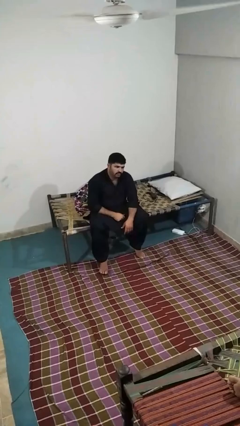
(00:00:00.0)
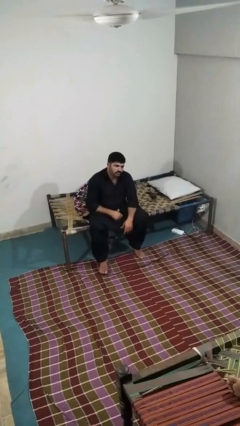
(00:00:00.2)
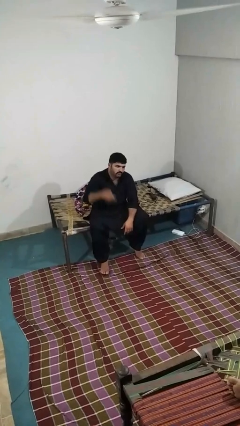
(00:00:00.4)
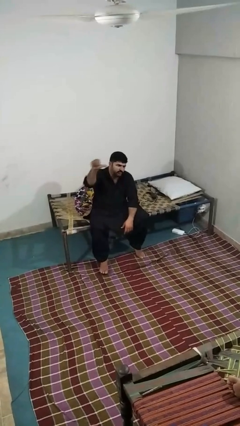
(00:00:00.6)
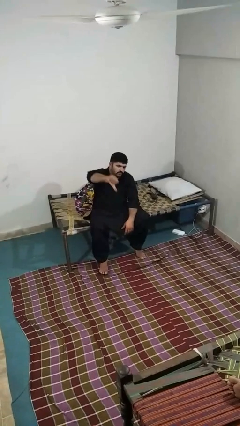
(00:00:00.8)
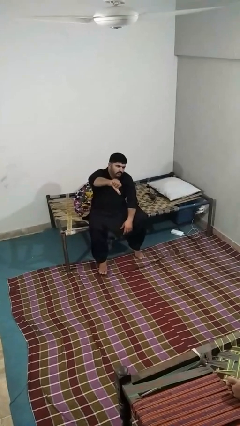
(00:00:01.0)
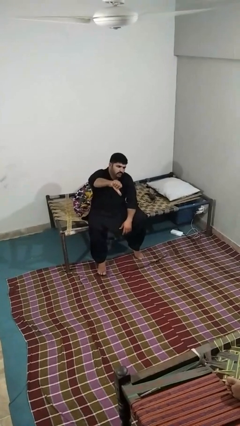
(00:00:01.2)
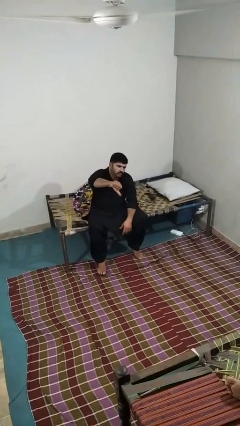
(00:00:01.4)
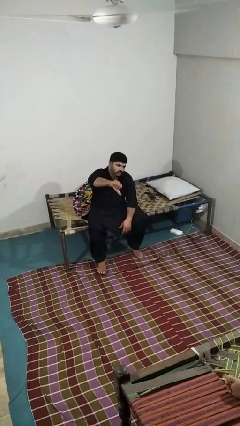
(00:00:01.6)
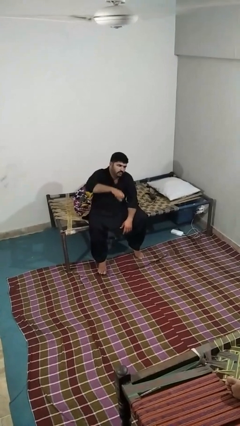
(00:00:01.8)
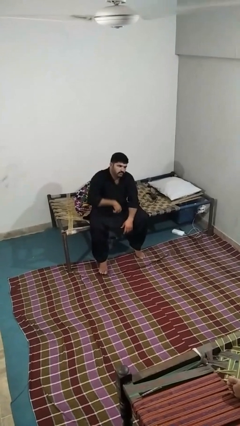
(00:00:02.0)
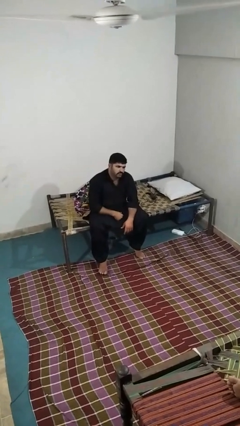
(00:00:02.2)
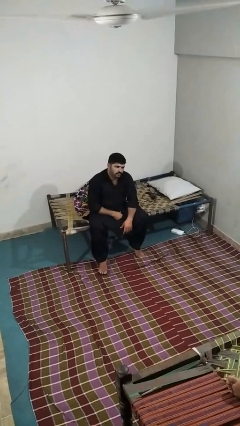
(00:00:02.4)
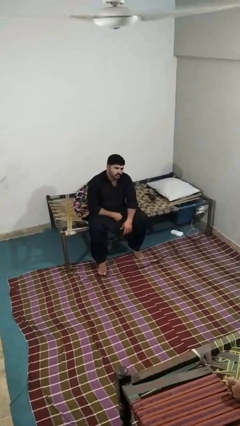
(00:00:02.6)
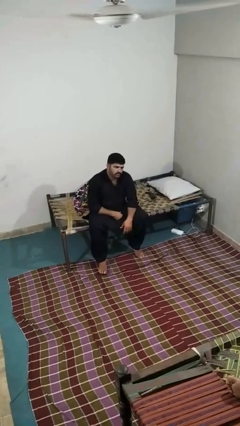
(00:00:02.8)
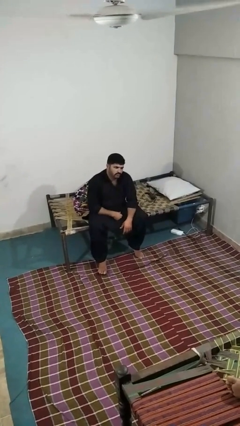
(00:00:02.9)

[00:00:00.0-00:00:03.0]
person gestures thumbs down

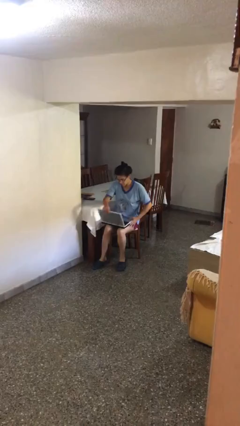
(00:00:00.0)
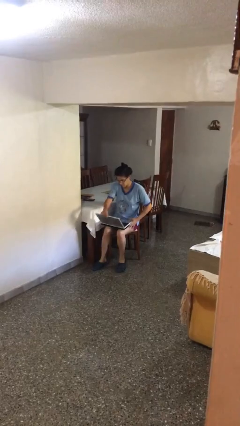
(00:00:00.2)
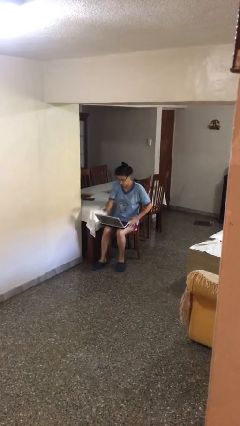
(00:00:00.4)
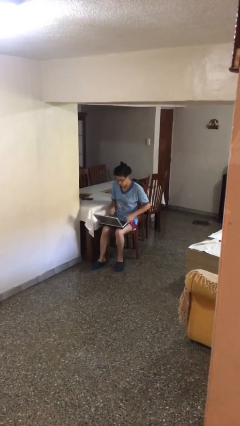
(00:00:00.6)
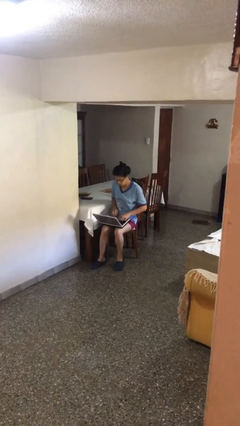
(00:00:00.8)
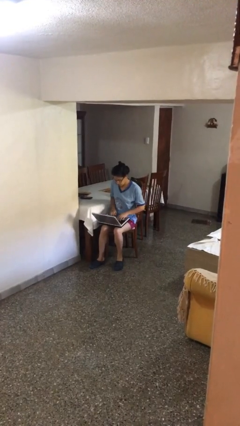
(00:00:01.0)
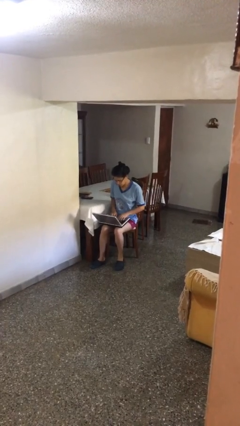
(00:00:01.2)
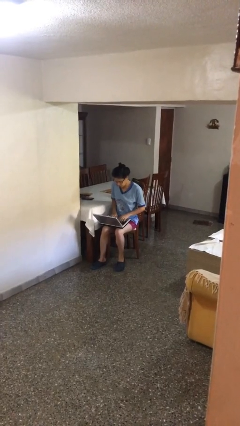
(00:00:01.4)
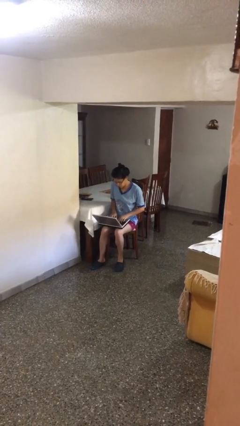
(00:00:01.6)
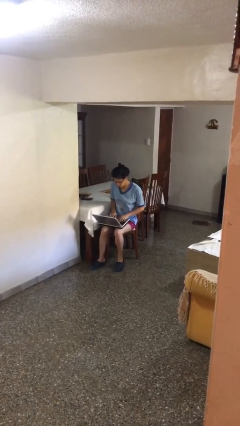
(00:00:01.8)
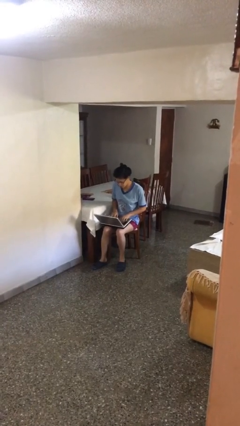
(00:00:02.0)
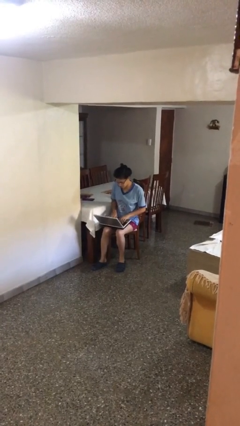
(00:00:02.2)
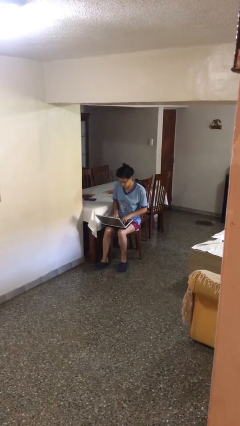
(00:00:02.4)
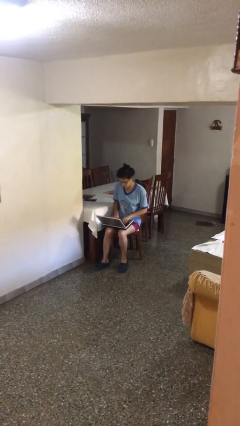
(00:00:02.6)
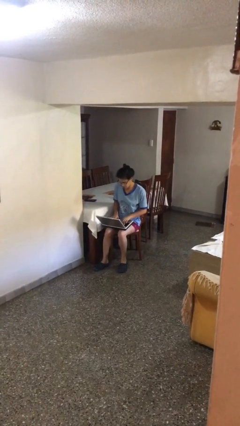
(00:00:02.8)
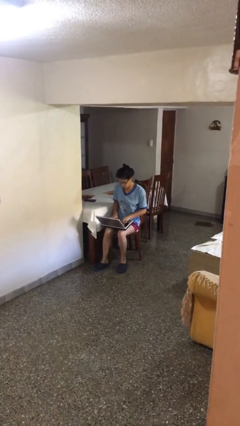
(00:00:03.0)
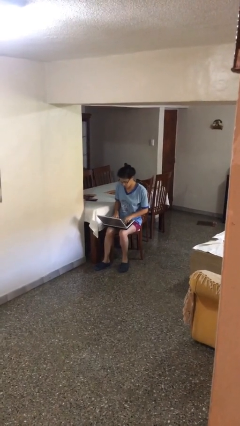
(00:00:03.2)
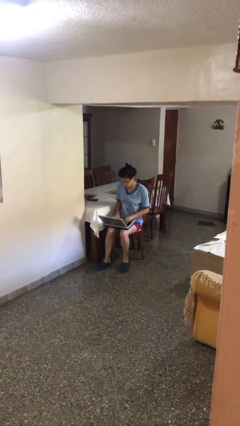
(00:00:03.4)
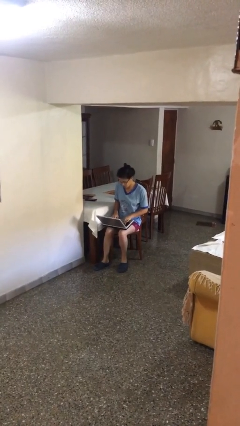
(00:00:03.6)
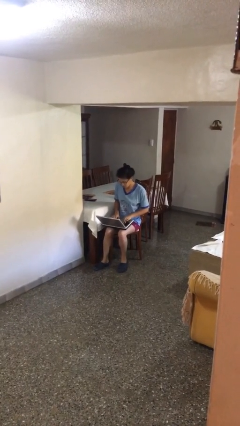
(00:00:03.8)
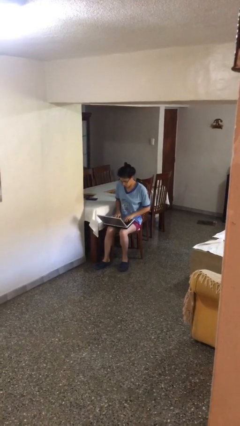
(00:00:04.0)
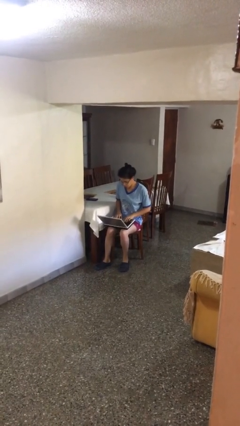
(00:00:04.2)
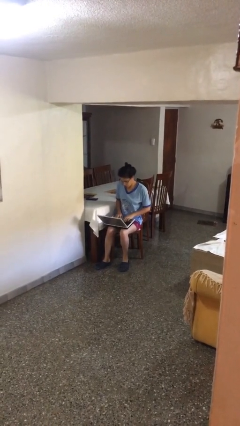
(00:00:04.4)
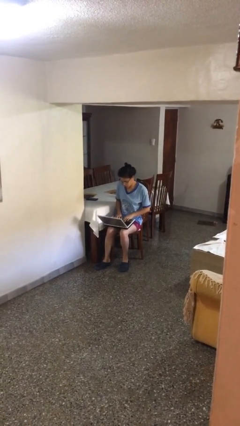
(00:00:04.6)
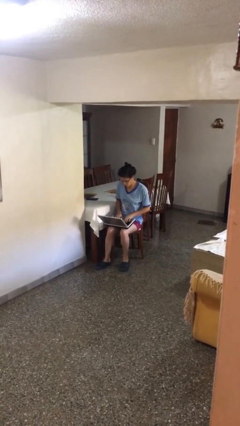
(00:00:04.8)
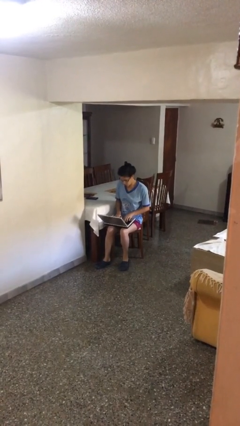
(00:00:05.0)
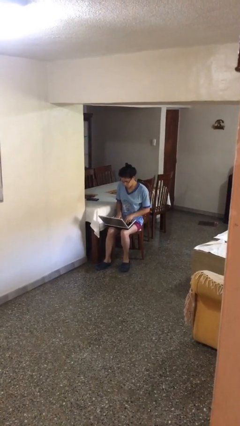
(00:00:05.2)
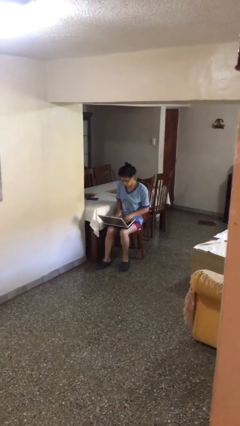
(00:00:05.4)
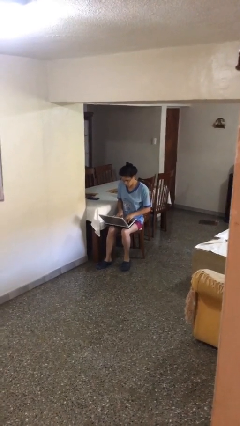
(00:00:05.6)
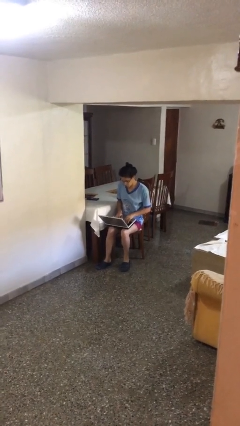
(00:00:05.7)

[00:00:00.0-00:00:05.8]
person interacts with laptop

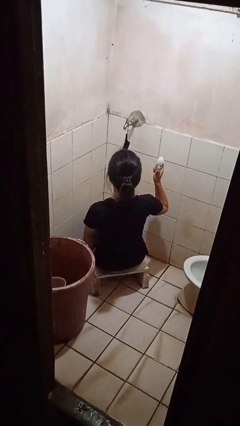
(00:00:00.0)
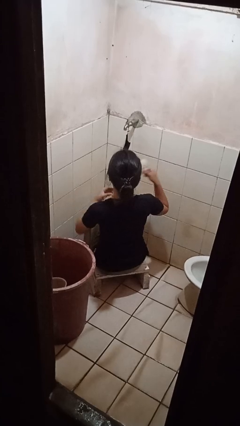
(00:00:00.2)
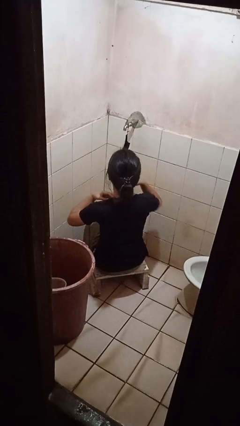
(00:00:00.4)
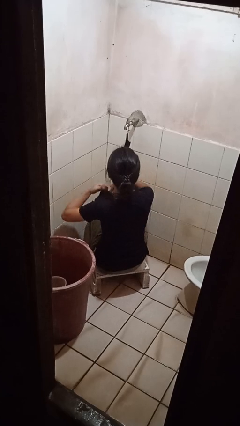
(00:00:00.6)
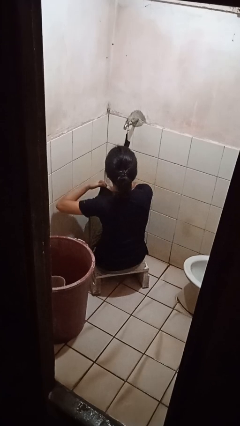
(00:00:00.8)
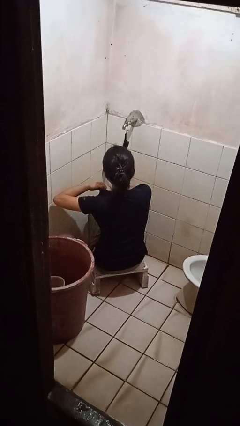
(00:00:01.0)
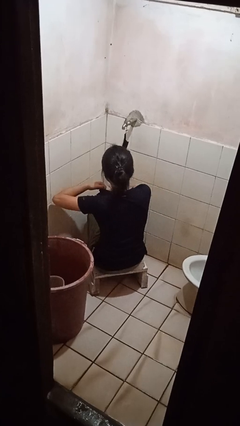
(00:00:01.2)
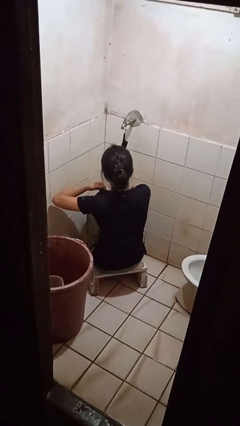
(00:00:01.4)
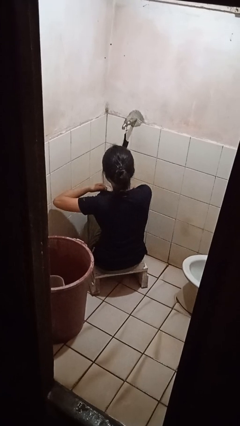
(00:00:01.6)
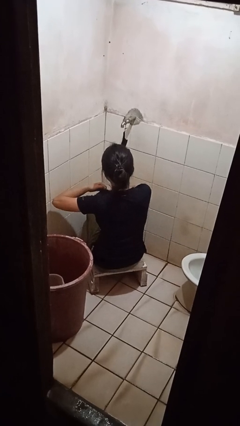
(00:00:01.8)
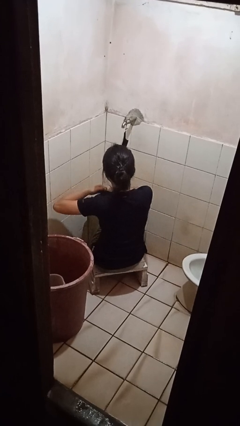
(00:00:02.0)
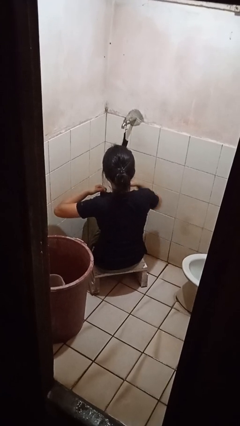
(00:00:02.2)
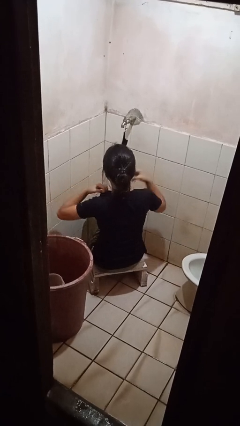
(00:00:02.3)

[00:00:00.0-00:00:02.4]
person applies deodorant

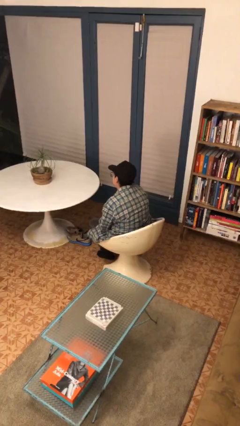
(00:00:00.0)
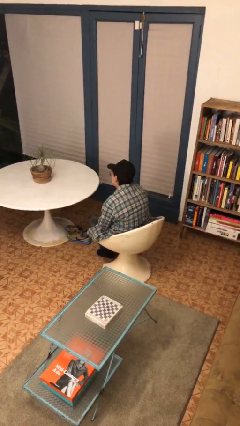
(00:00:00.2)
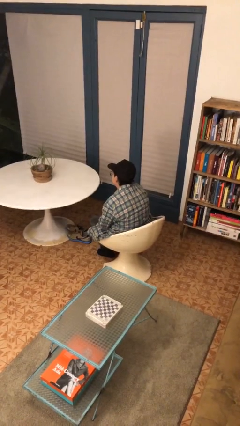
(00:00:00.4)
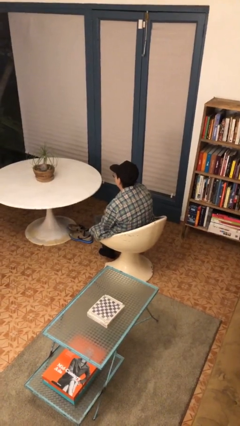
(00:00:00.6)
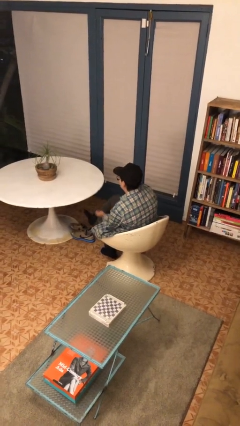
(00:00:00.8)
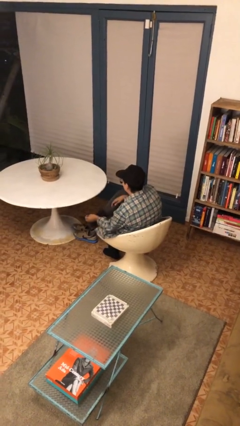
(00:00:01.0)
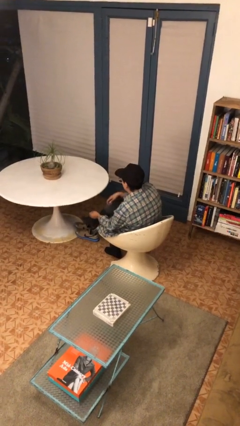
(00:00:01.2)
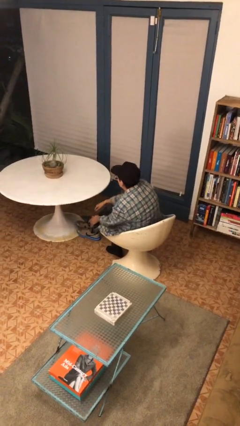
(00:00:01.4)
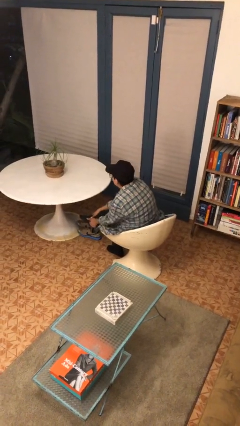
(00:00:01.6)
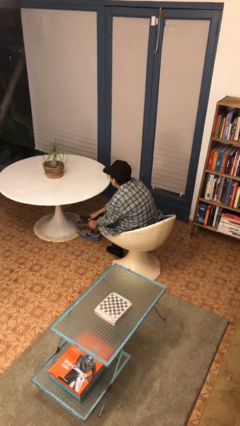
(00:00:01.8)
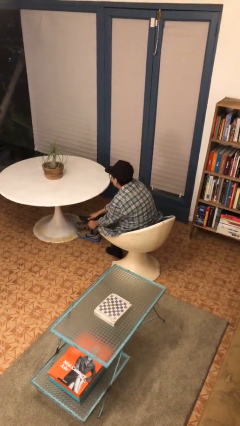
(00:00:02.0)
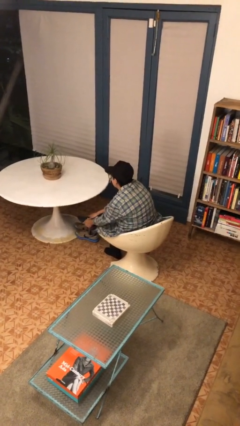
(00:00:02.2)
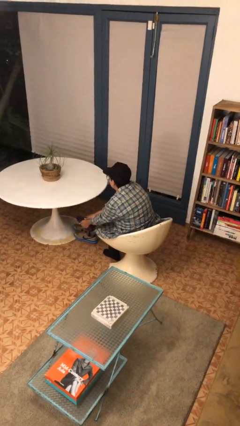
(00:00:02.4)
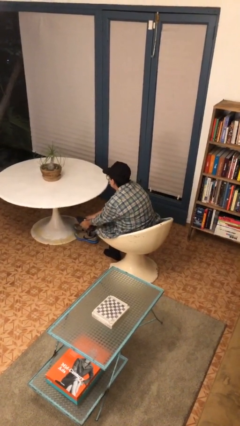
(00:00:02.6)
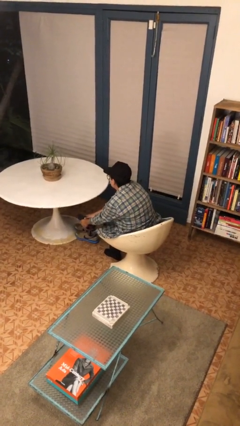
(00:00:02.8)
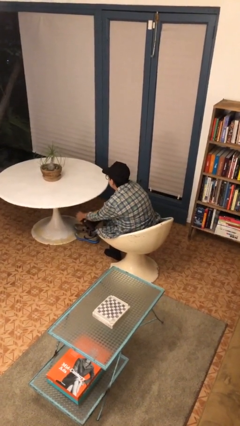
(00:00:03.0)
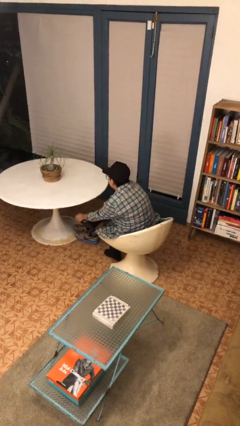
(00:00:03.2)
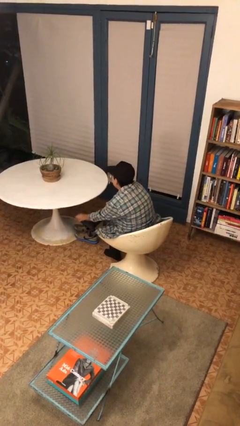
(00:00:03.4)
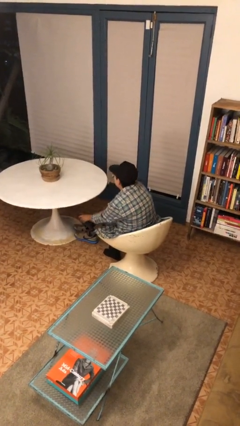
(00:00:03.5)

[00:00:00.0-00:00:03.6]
person rubs foot

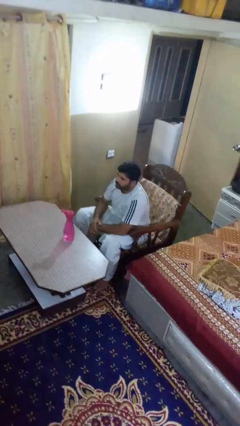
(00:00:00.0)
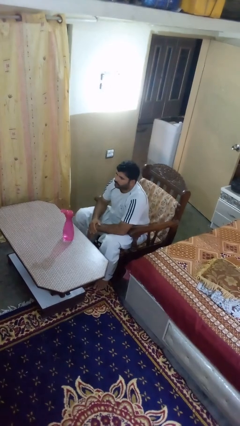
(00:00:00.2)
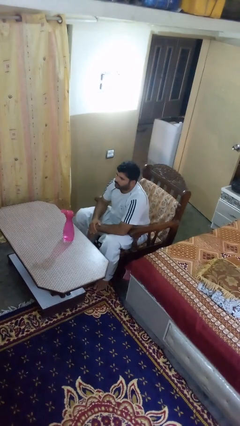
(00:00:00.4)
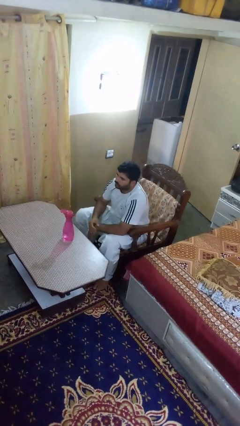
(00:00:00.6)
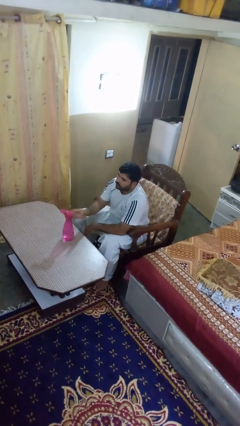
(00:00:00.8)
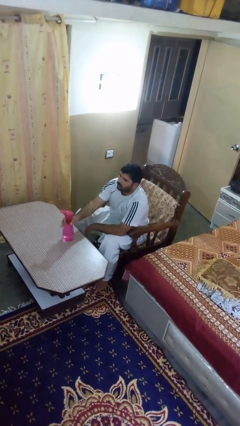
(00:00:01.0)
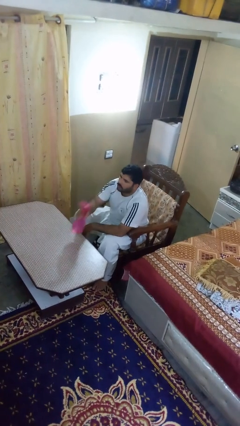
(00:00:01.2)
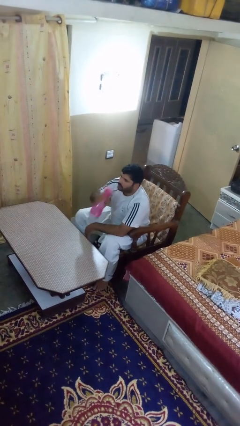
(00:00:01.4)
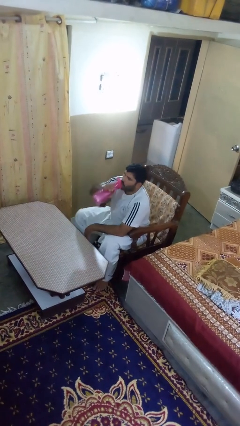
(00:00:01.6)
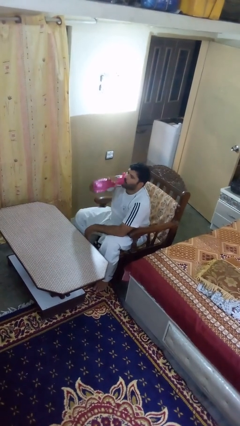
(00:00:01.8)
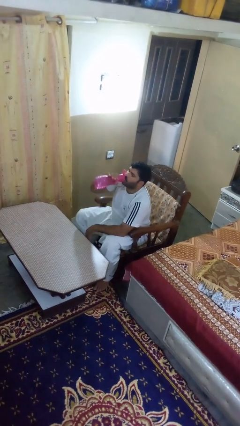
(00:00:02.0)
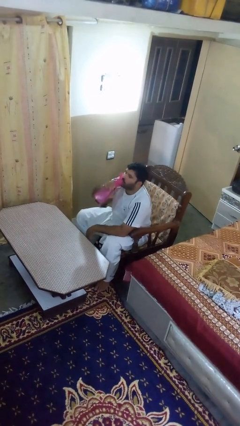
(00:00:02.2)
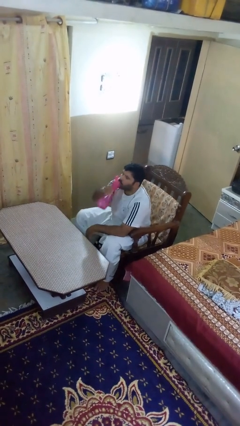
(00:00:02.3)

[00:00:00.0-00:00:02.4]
person drinks from bottle
